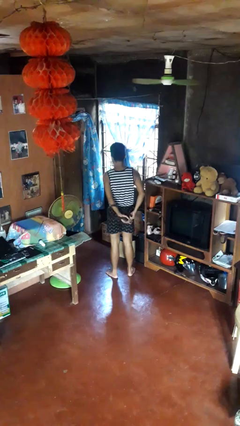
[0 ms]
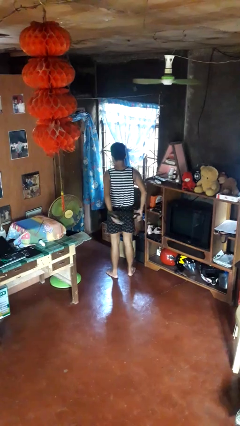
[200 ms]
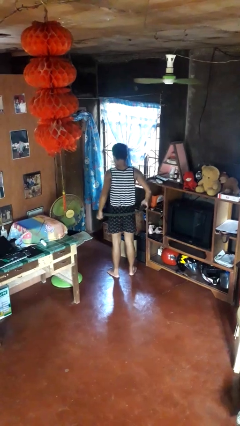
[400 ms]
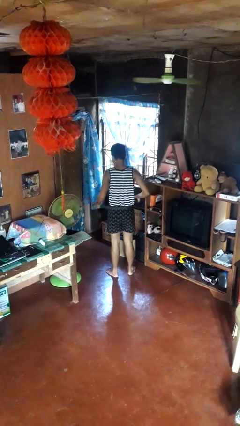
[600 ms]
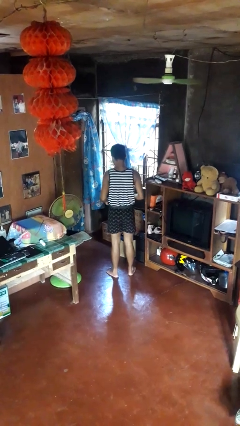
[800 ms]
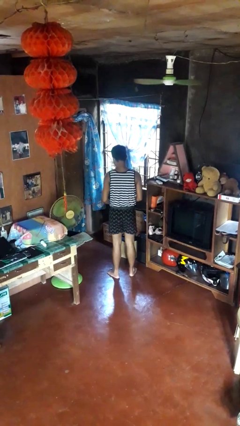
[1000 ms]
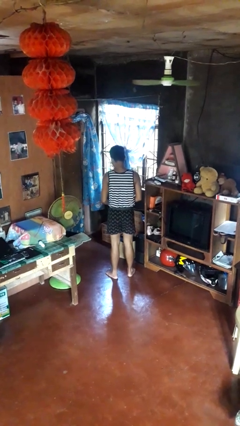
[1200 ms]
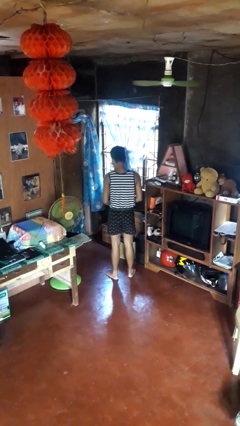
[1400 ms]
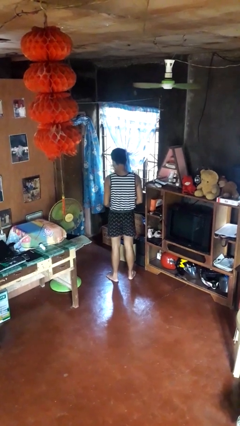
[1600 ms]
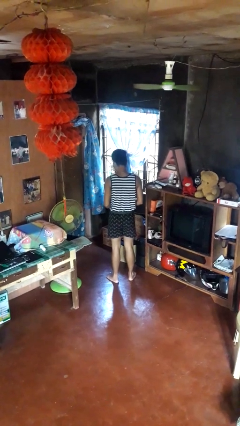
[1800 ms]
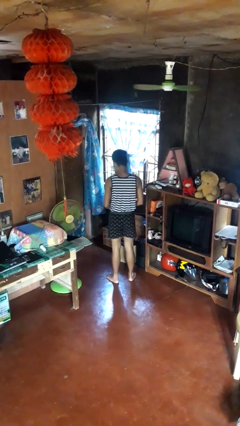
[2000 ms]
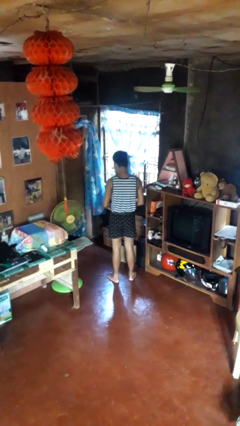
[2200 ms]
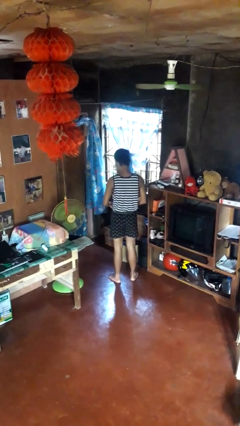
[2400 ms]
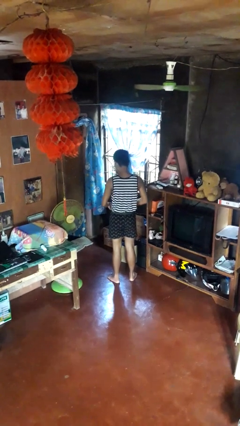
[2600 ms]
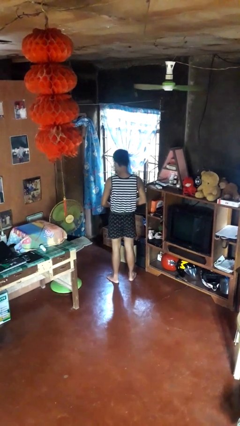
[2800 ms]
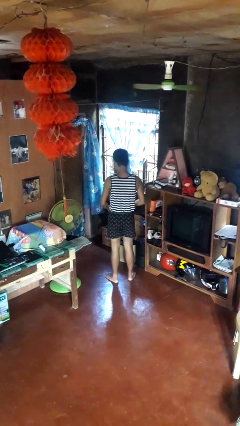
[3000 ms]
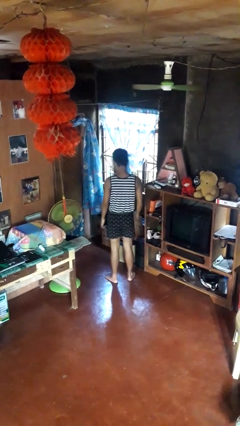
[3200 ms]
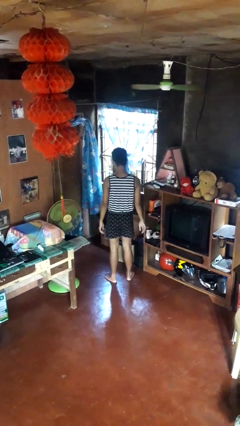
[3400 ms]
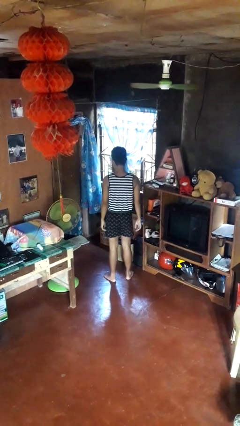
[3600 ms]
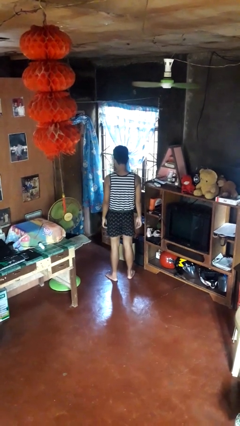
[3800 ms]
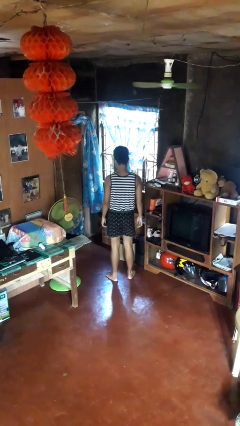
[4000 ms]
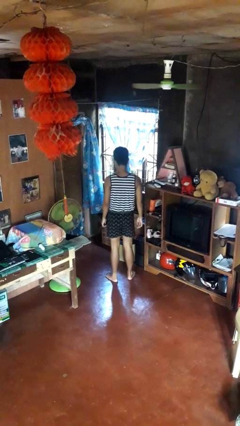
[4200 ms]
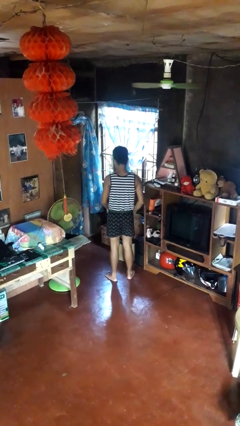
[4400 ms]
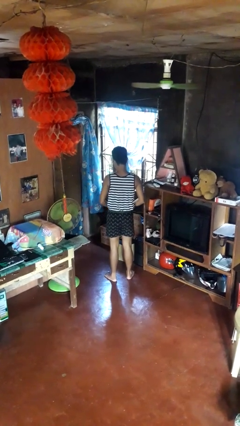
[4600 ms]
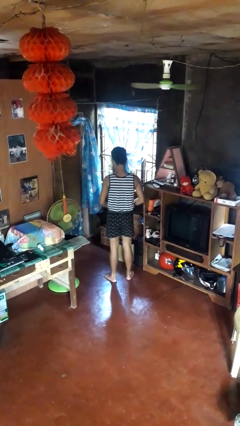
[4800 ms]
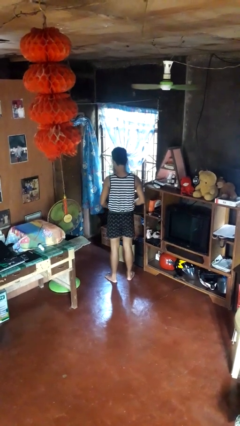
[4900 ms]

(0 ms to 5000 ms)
person puts on belt

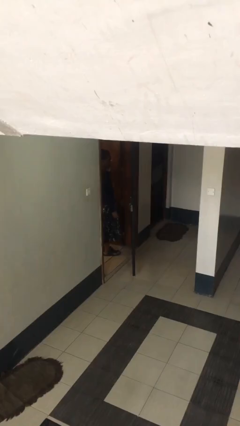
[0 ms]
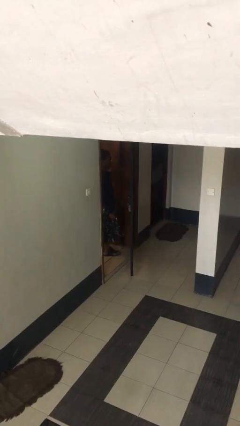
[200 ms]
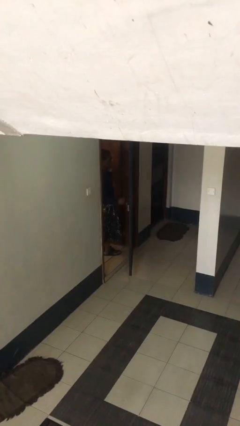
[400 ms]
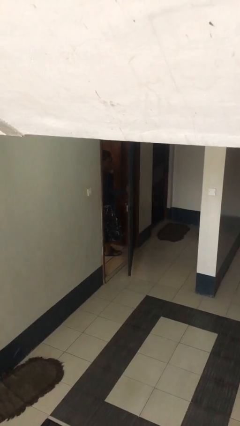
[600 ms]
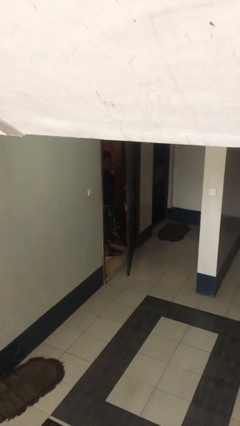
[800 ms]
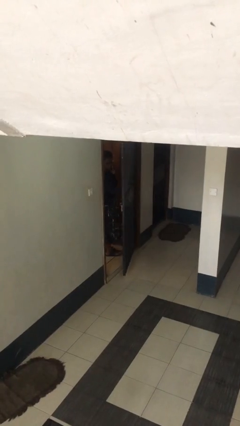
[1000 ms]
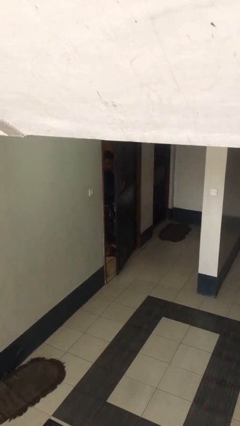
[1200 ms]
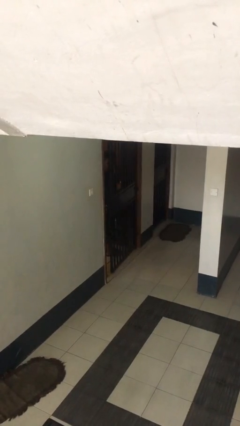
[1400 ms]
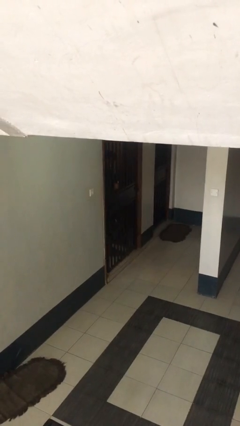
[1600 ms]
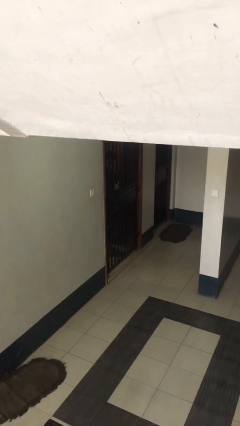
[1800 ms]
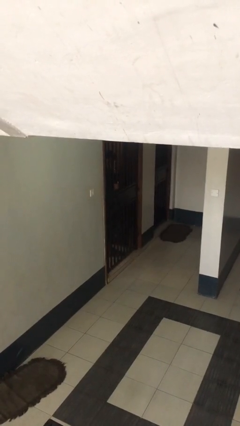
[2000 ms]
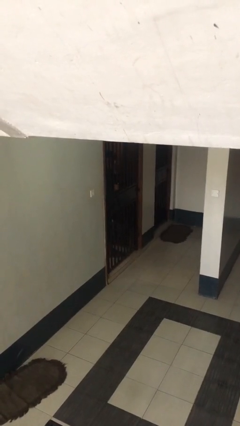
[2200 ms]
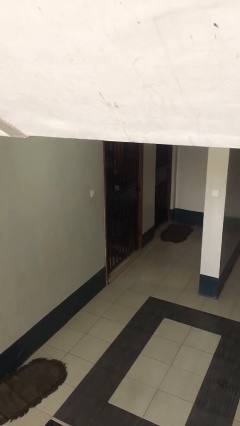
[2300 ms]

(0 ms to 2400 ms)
person closes facility door

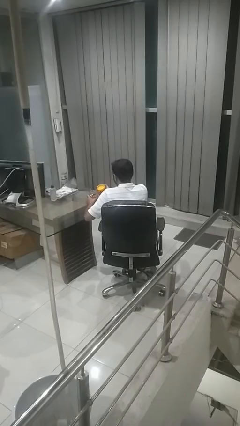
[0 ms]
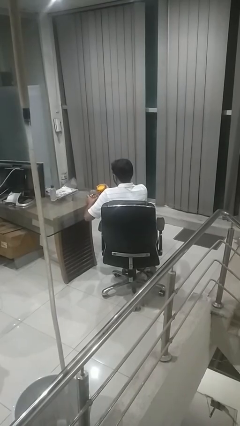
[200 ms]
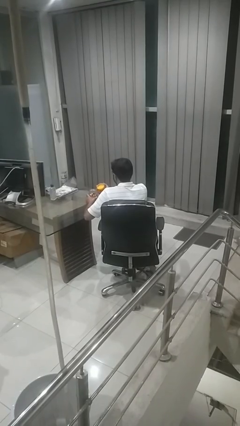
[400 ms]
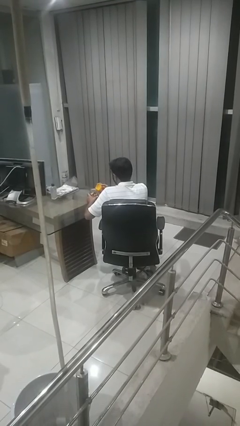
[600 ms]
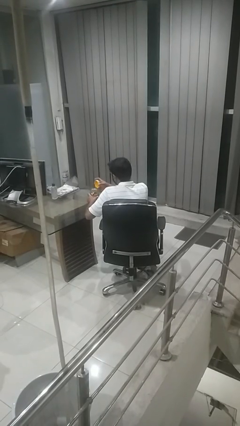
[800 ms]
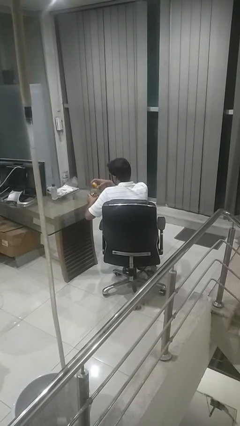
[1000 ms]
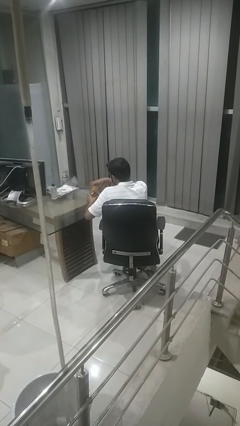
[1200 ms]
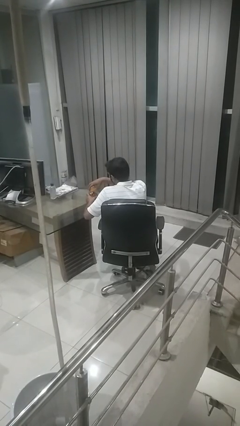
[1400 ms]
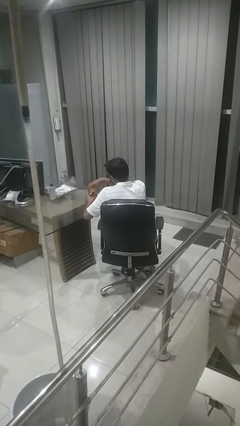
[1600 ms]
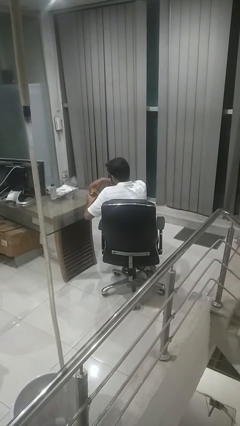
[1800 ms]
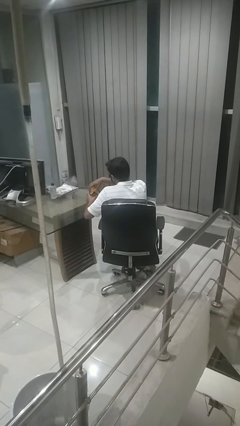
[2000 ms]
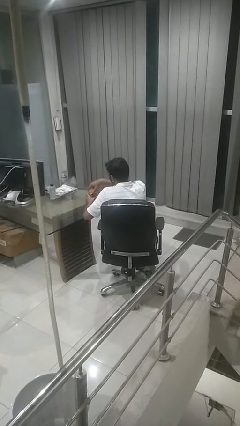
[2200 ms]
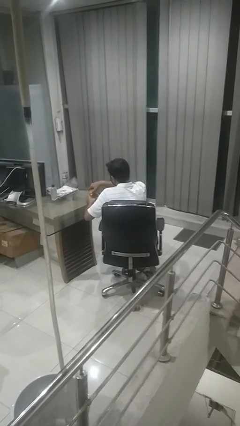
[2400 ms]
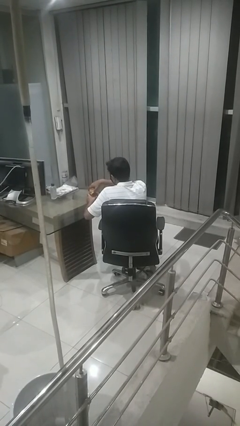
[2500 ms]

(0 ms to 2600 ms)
person closes jar

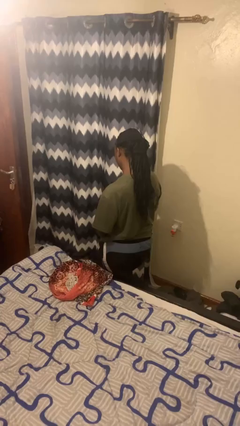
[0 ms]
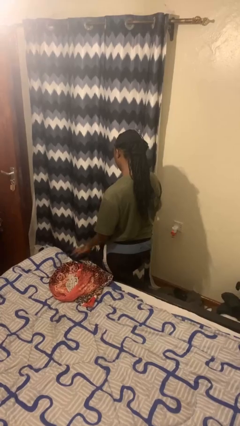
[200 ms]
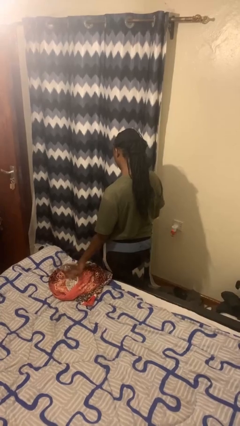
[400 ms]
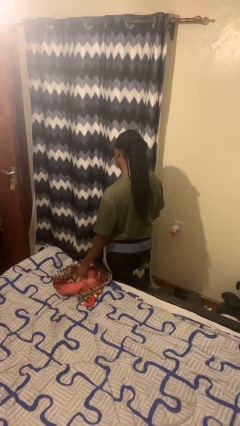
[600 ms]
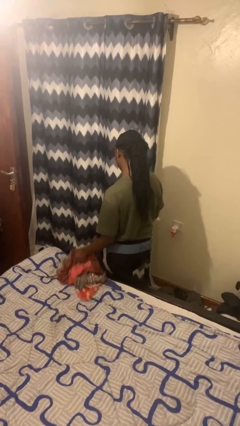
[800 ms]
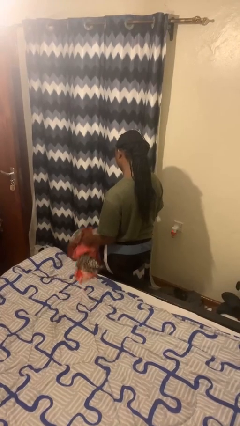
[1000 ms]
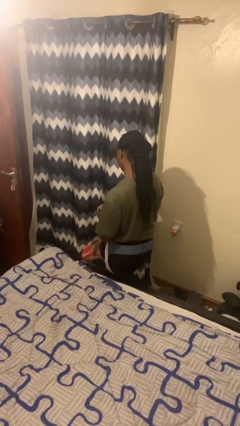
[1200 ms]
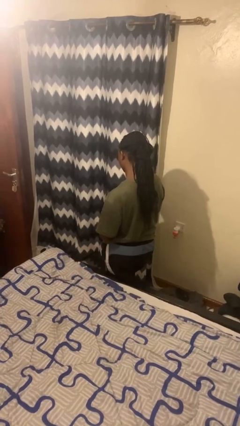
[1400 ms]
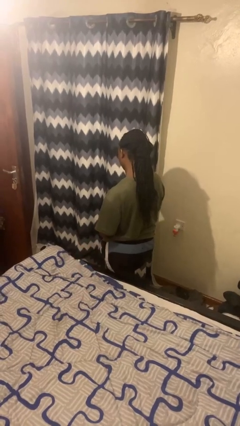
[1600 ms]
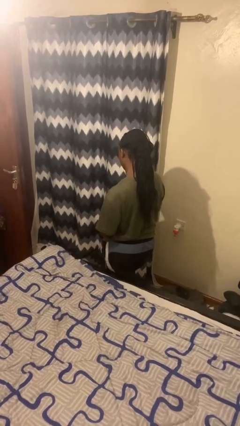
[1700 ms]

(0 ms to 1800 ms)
person picks up object from bed

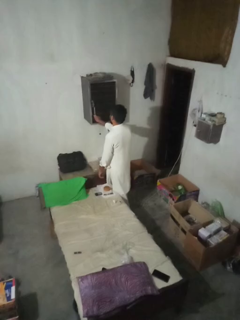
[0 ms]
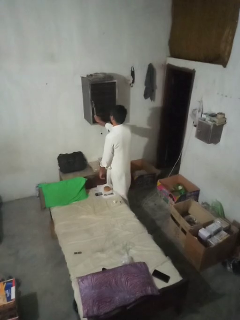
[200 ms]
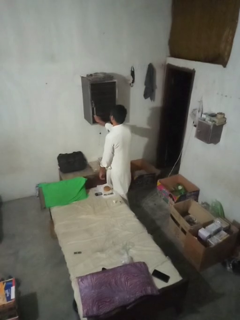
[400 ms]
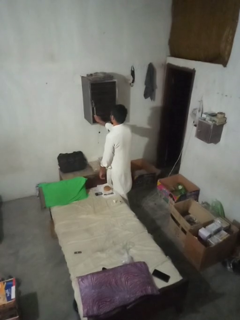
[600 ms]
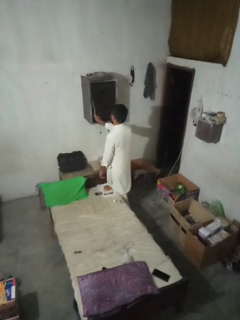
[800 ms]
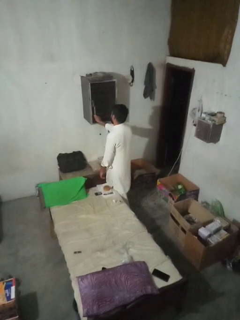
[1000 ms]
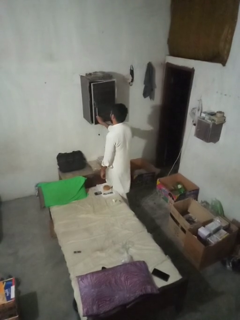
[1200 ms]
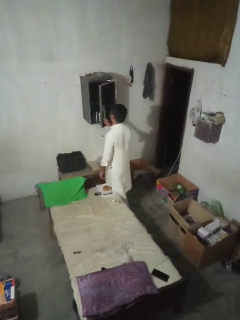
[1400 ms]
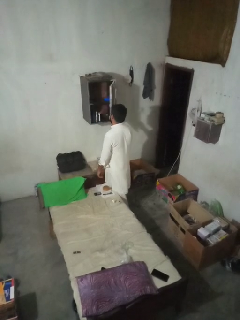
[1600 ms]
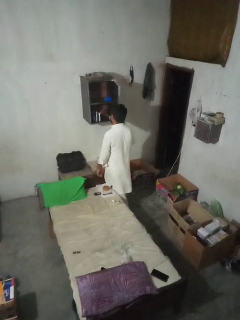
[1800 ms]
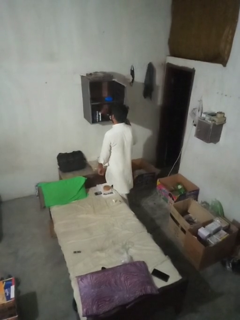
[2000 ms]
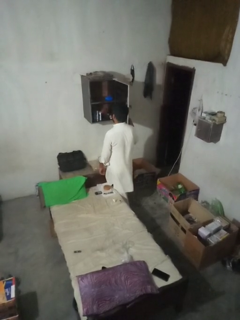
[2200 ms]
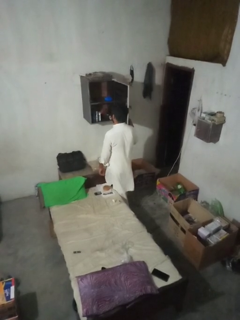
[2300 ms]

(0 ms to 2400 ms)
person opens dresser drawer

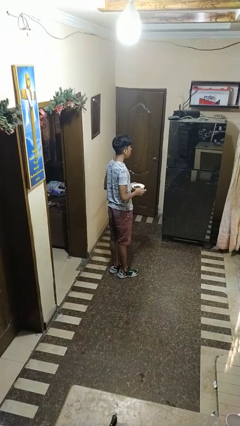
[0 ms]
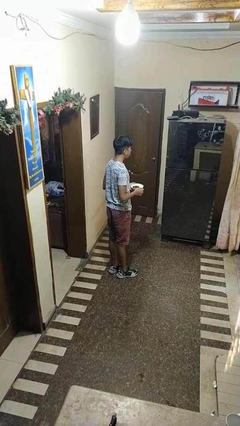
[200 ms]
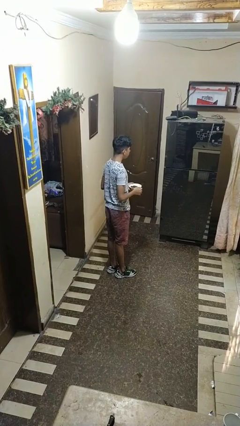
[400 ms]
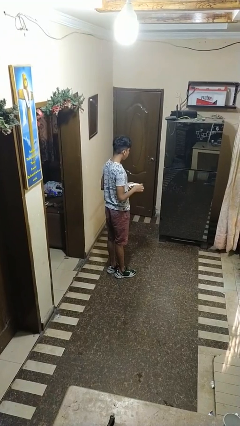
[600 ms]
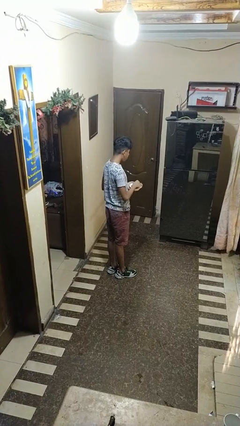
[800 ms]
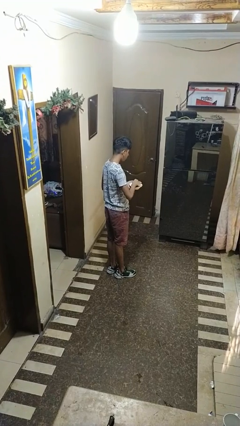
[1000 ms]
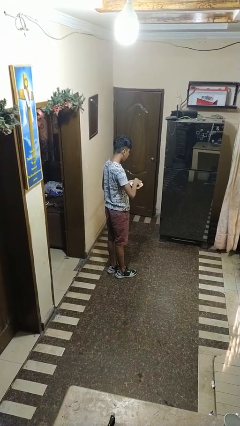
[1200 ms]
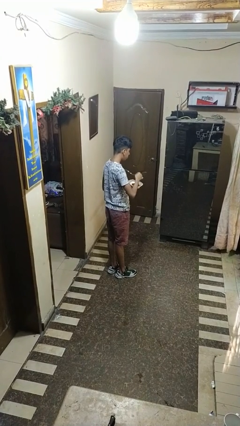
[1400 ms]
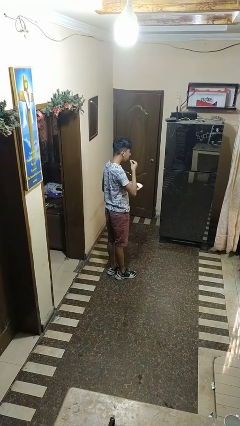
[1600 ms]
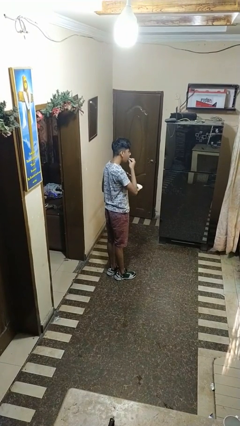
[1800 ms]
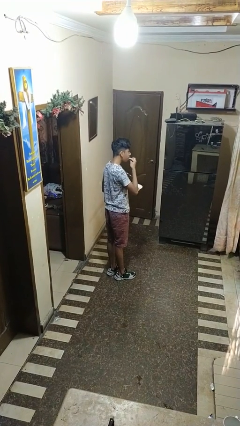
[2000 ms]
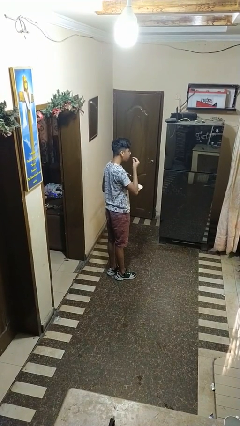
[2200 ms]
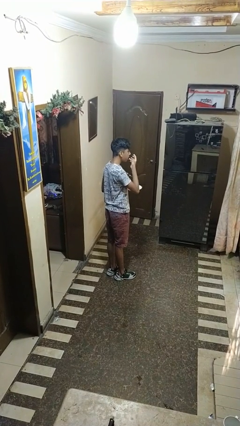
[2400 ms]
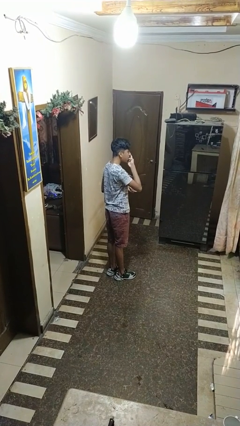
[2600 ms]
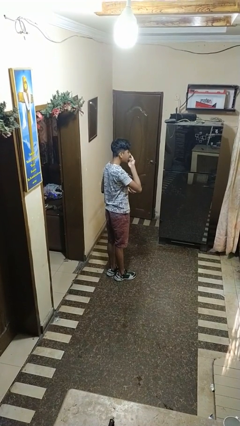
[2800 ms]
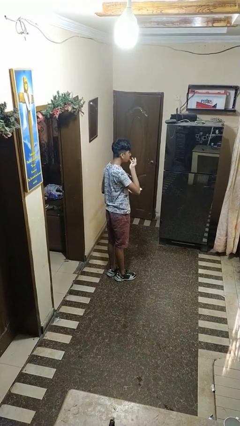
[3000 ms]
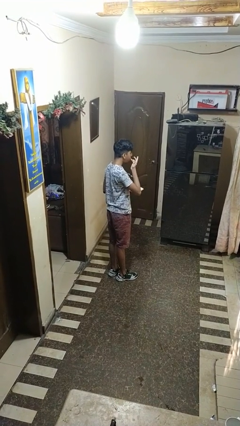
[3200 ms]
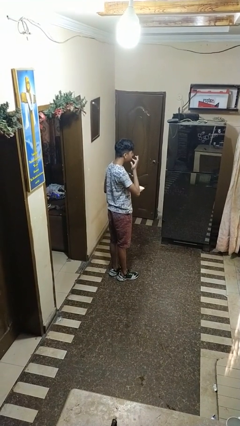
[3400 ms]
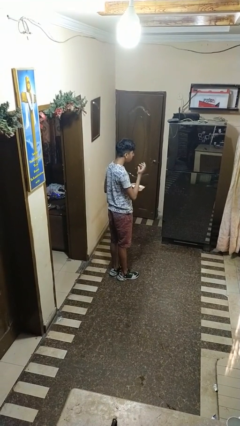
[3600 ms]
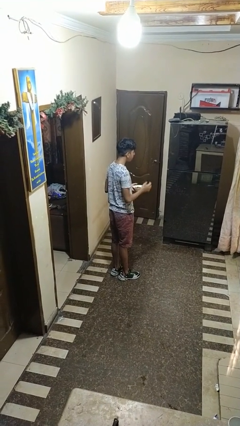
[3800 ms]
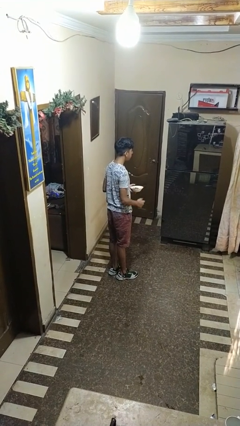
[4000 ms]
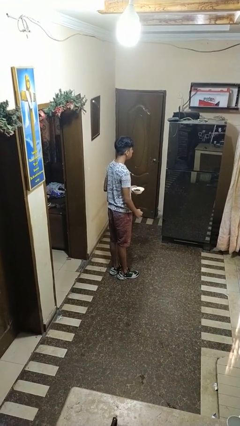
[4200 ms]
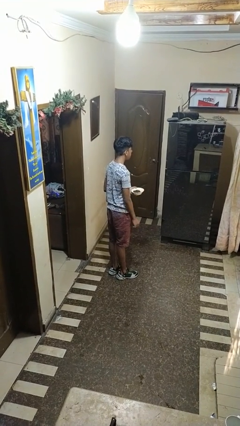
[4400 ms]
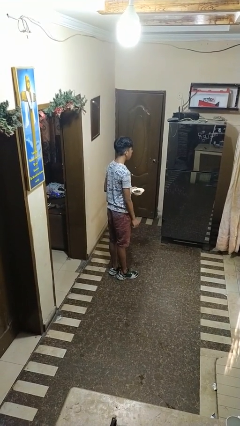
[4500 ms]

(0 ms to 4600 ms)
person licks fingers
